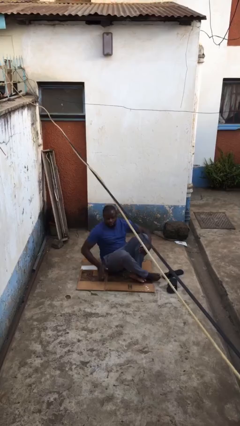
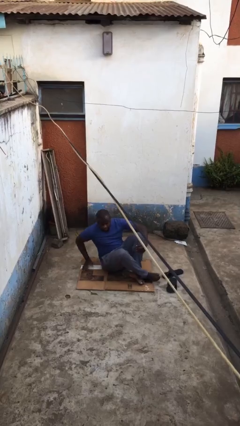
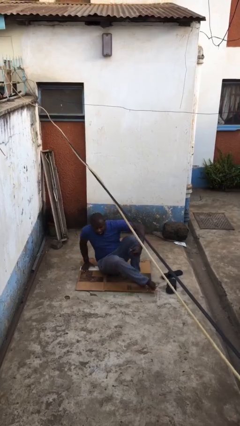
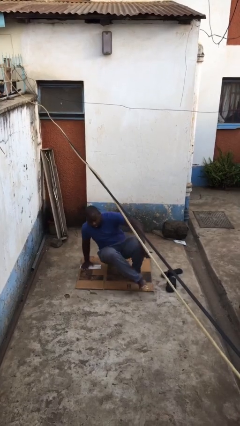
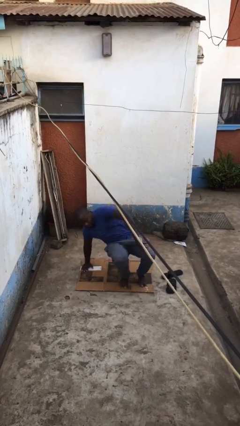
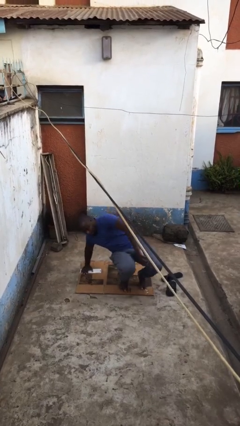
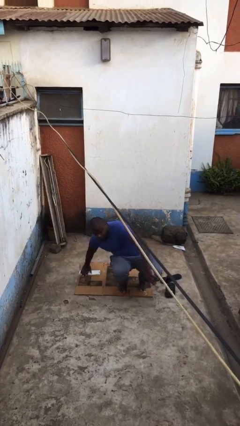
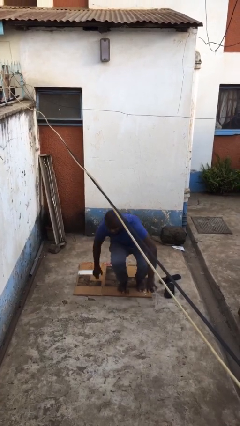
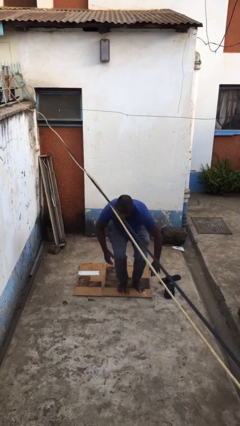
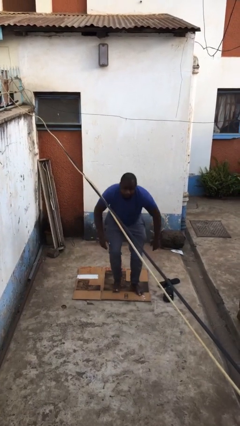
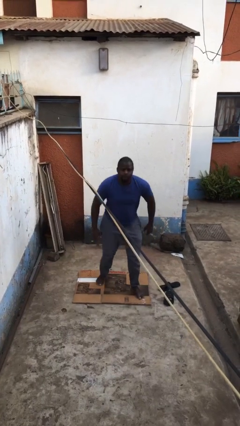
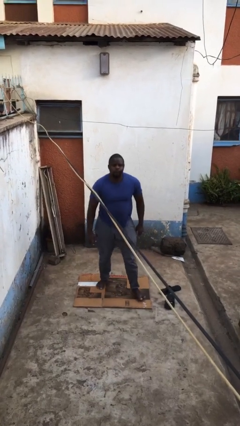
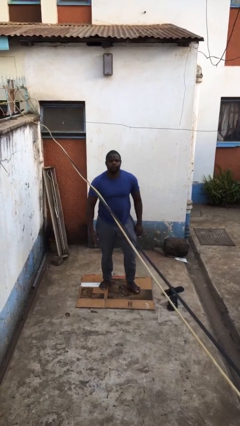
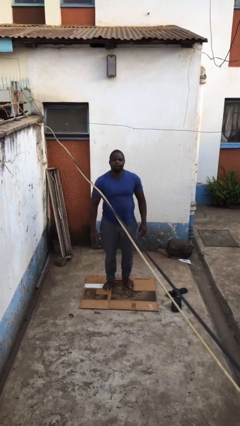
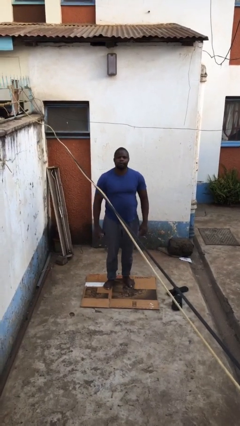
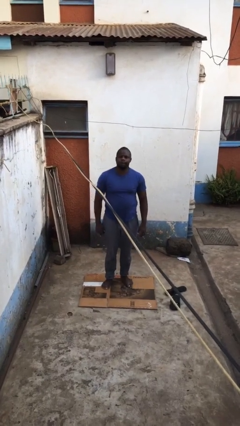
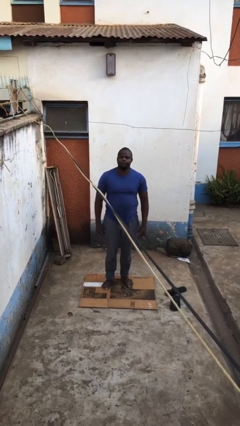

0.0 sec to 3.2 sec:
person stands up from floor

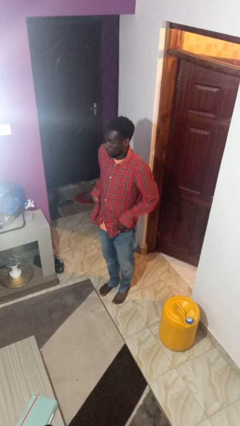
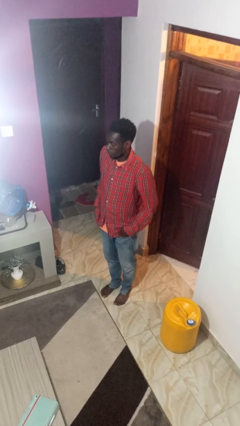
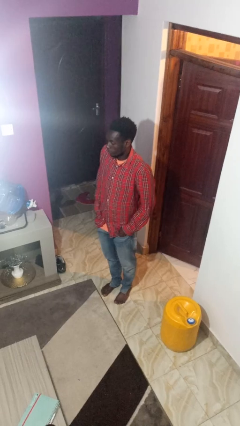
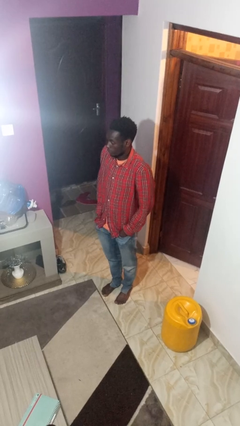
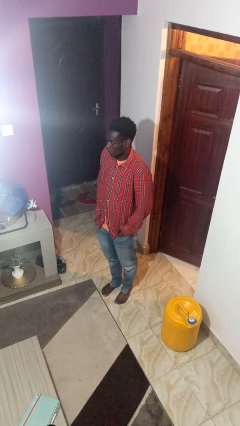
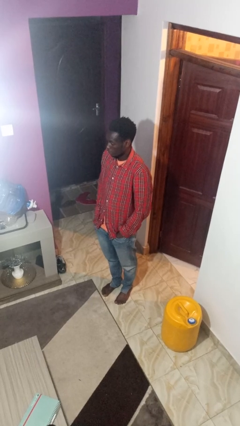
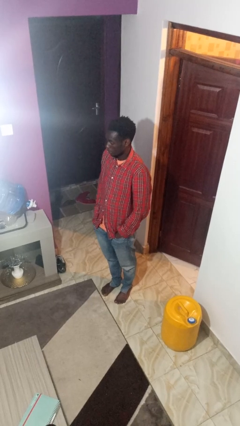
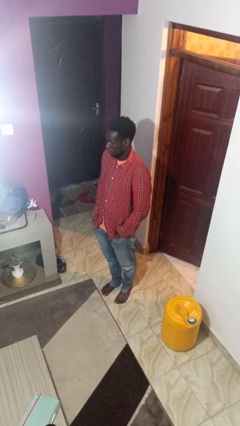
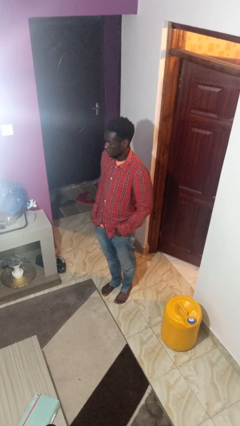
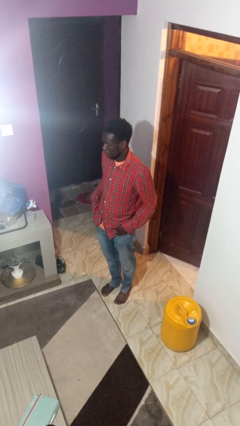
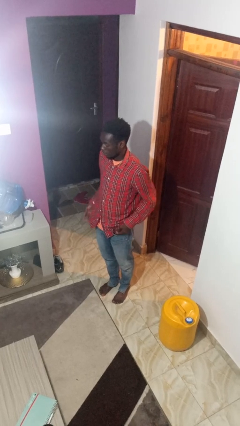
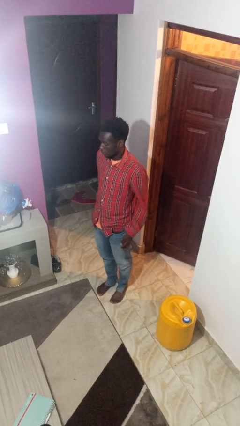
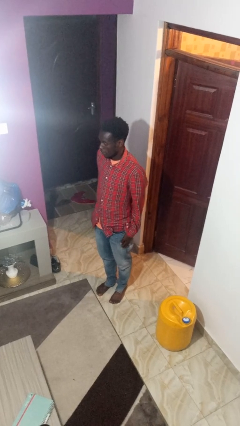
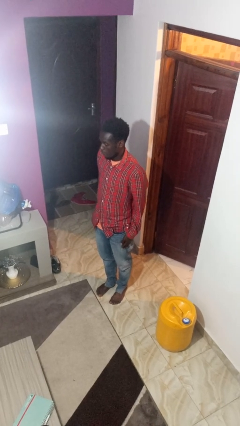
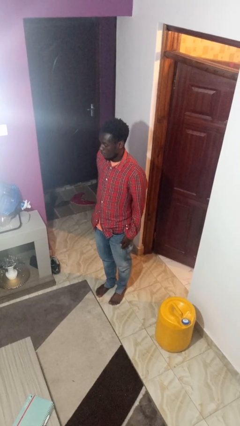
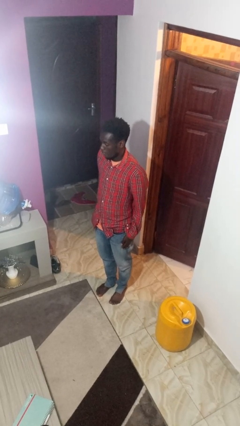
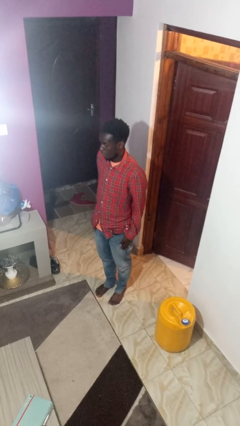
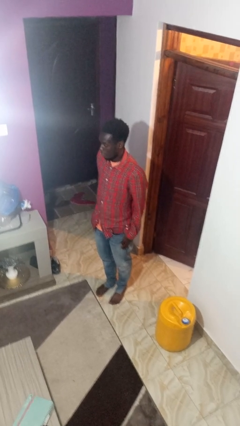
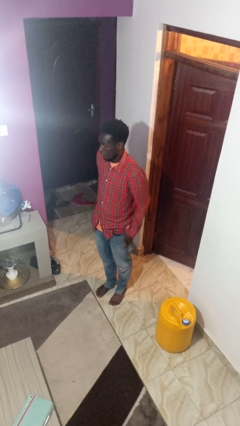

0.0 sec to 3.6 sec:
person puts hands in back pockets

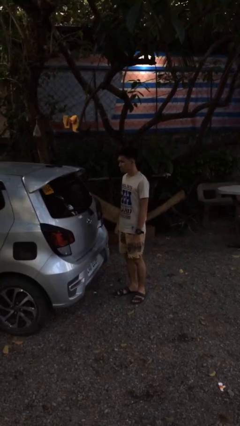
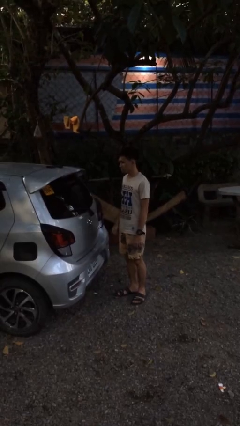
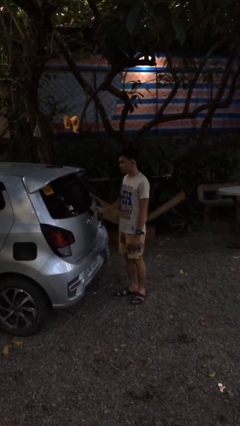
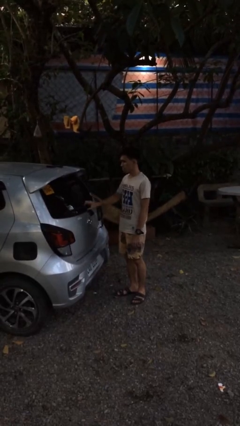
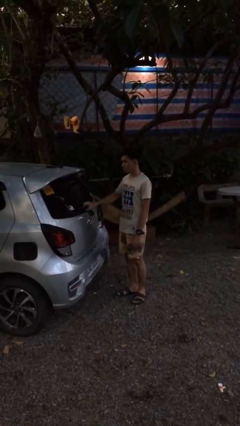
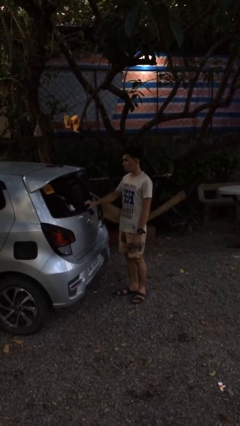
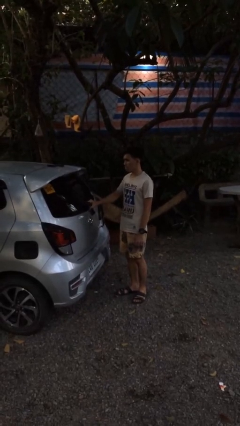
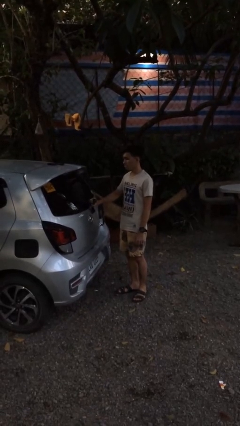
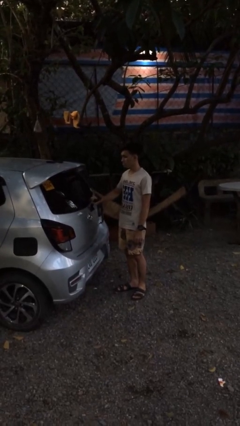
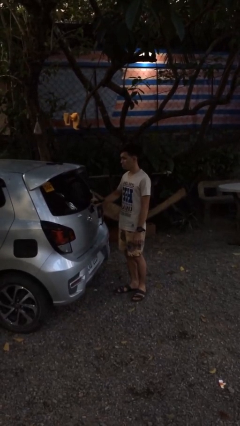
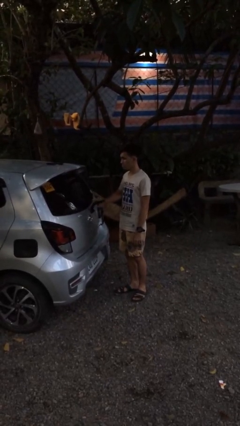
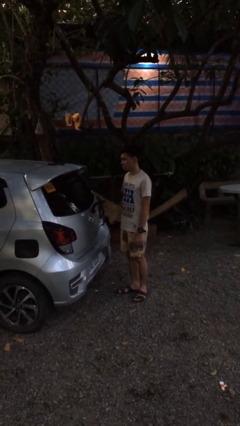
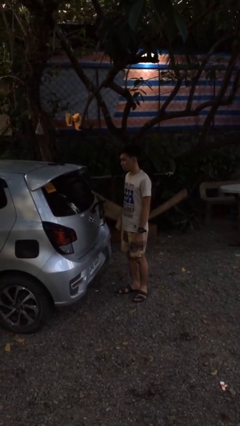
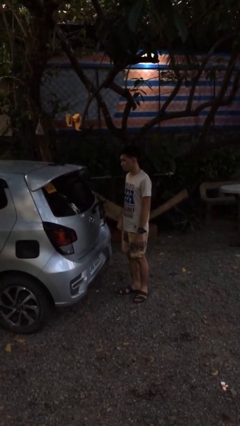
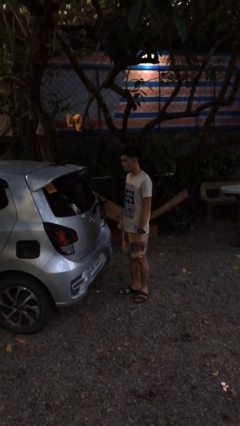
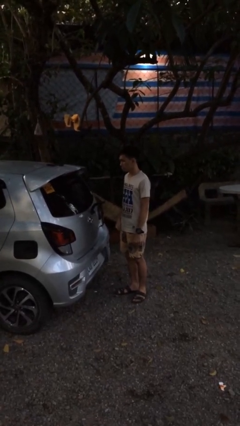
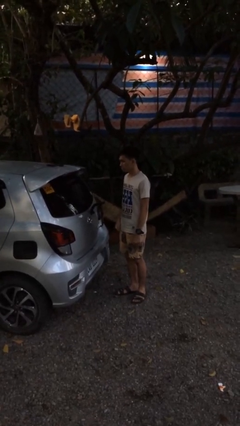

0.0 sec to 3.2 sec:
person flips up car wipers

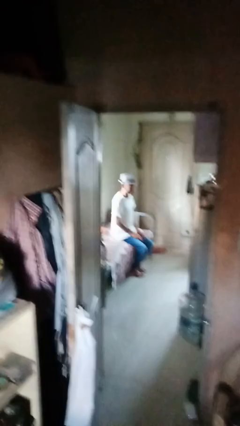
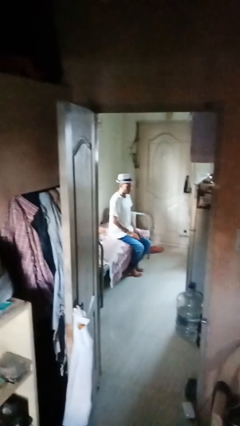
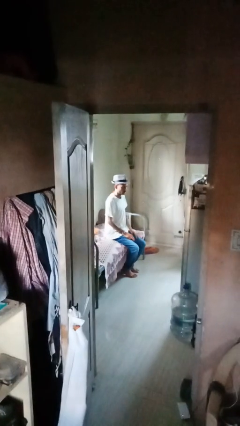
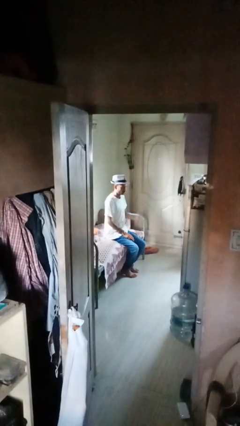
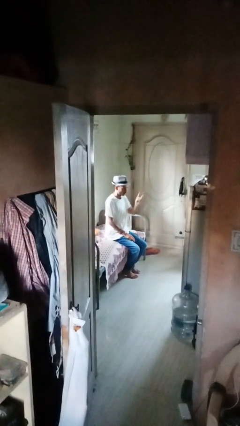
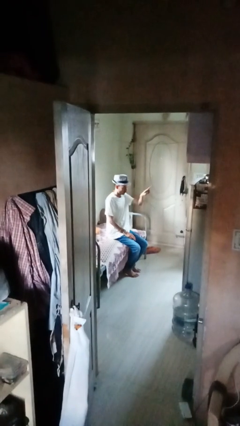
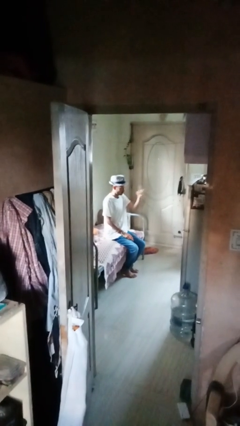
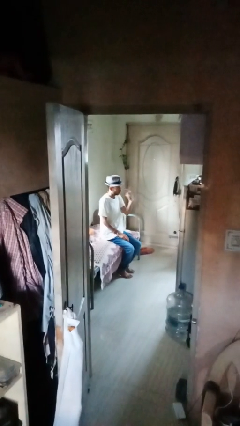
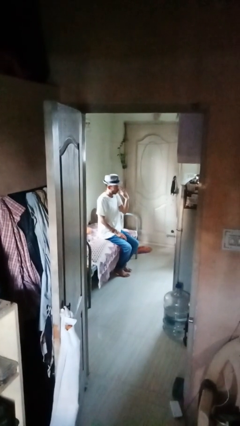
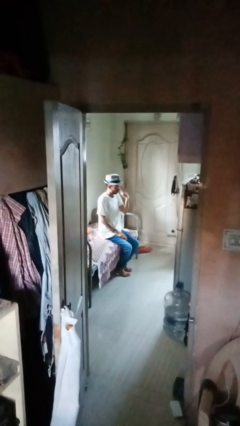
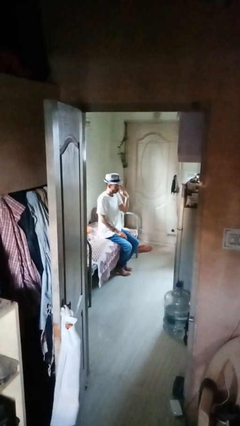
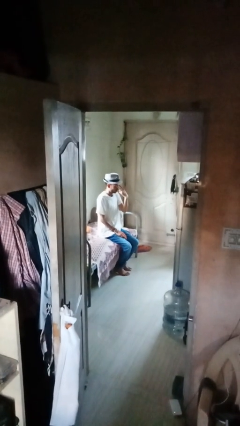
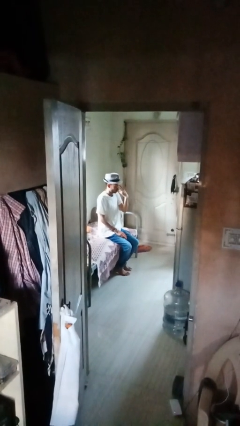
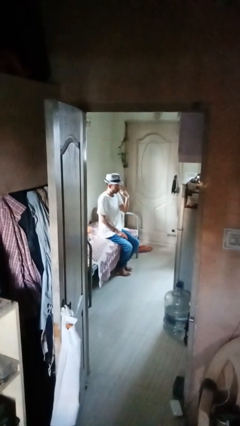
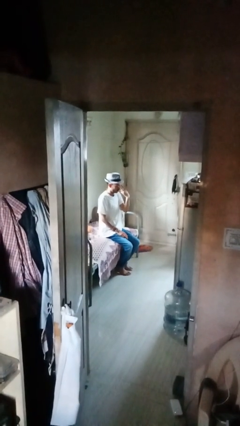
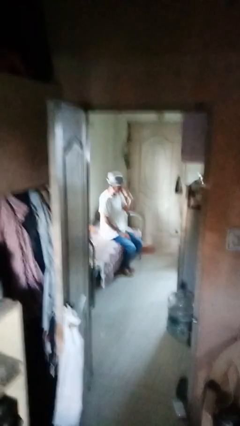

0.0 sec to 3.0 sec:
person gestures watch closely

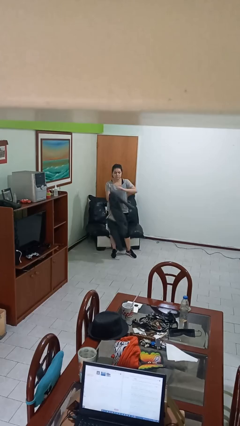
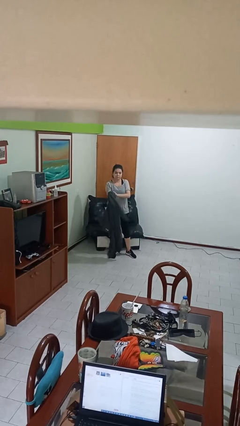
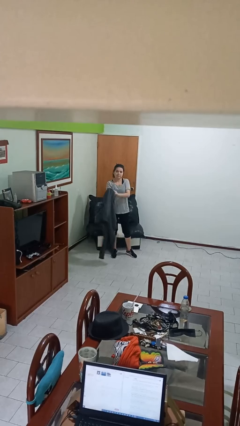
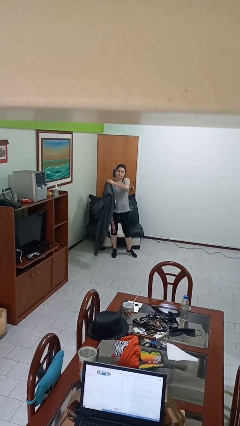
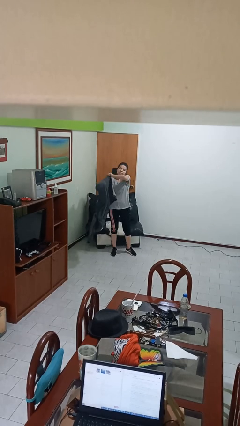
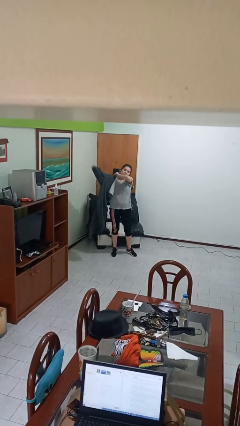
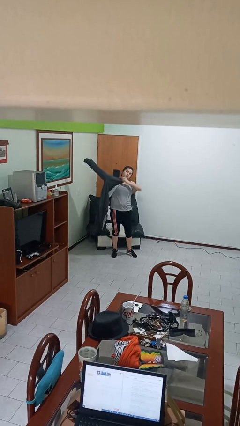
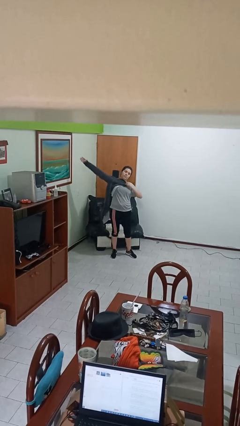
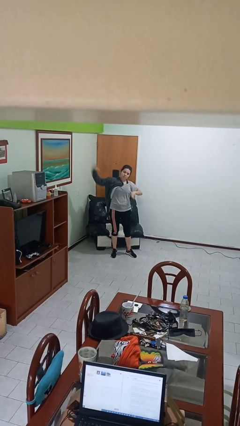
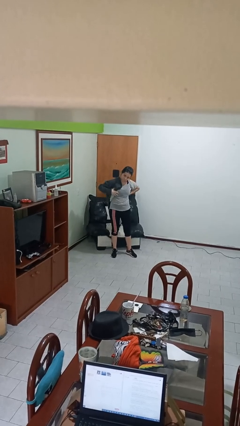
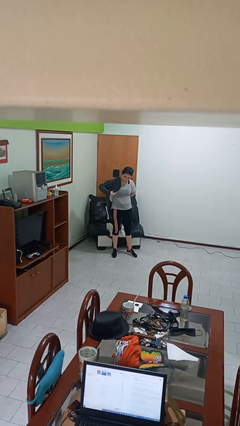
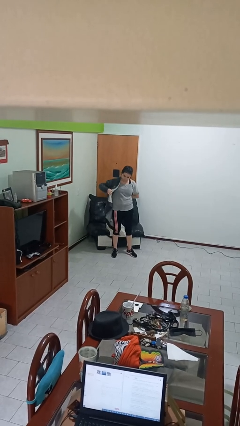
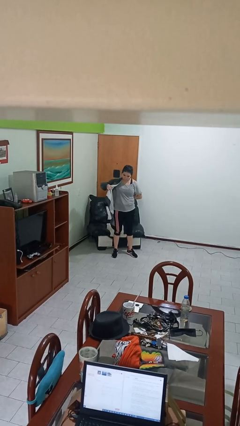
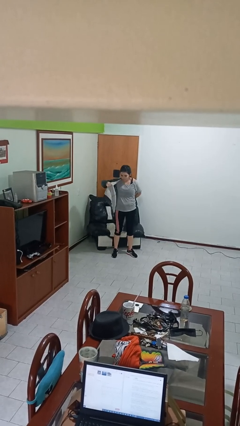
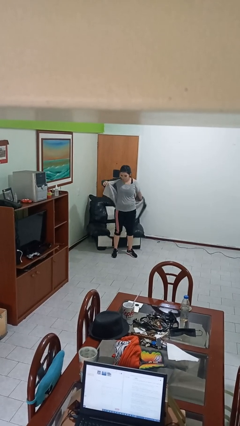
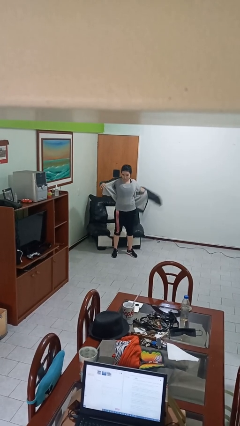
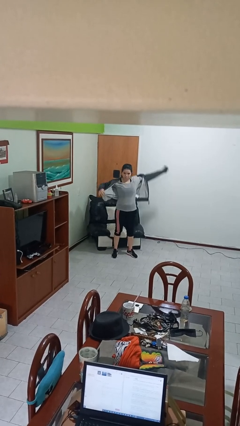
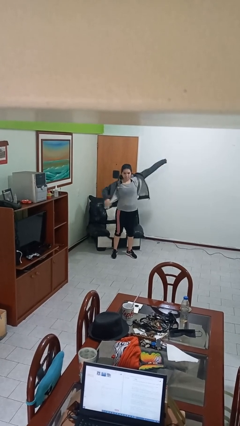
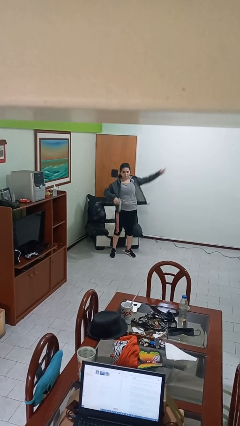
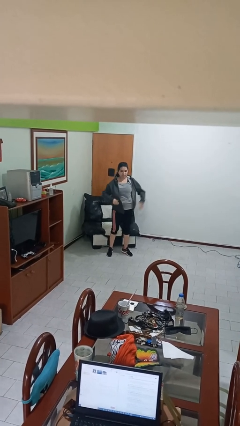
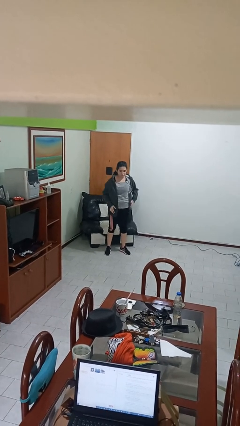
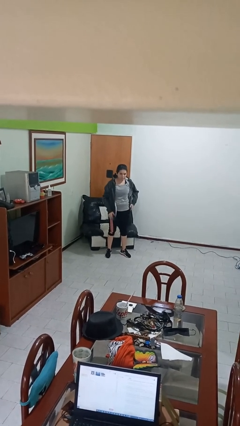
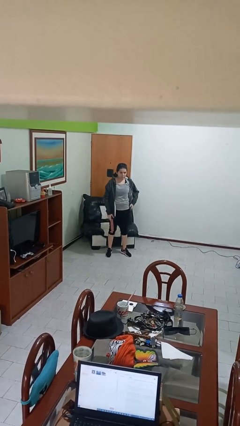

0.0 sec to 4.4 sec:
person puts on jacket

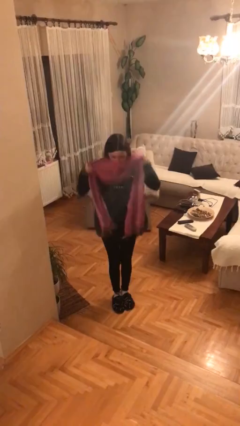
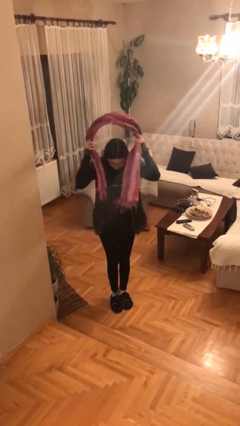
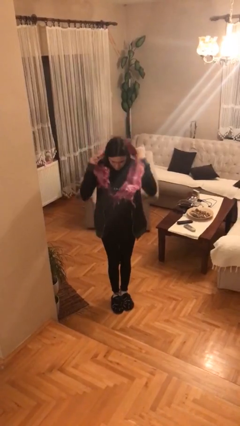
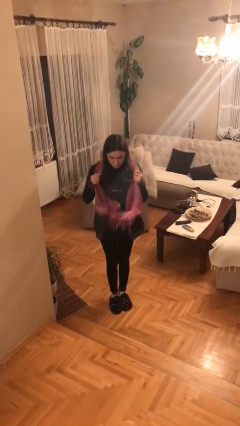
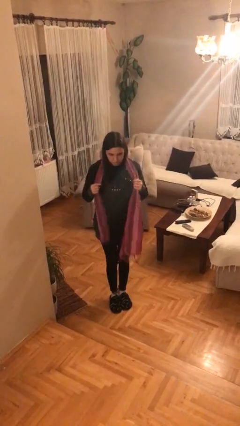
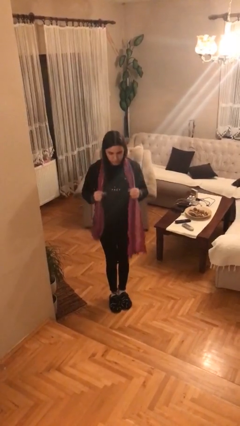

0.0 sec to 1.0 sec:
person puts on scarf
